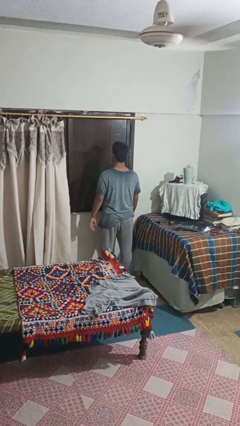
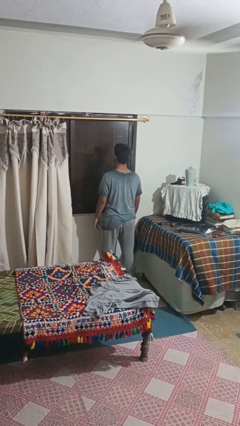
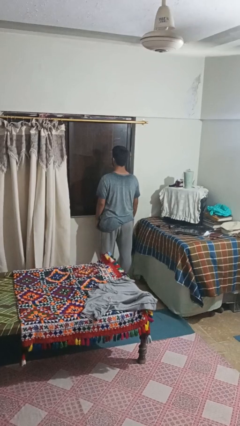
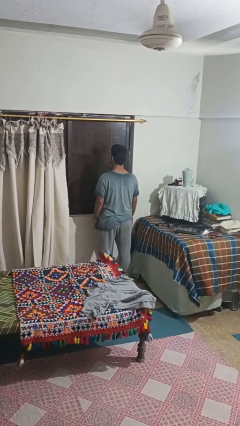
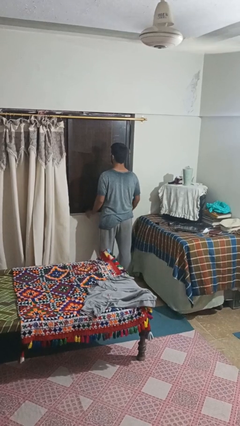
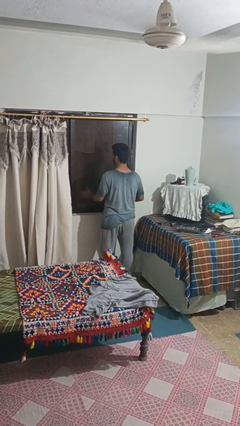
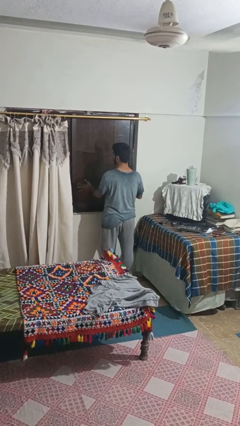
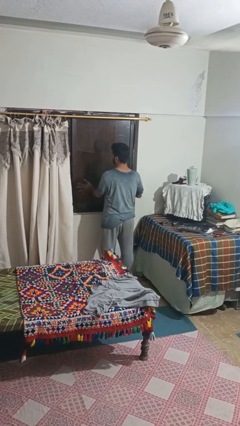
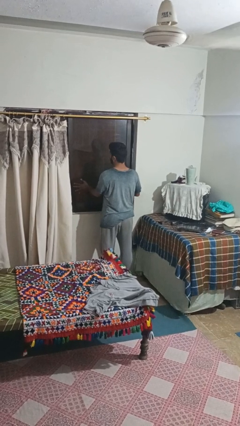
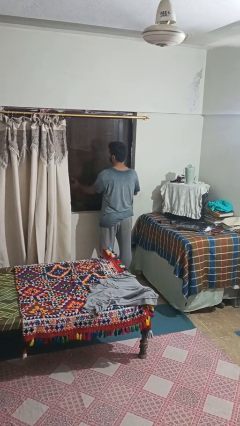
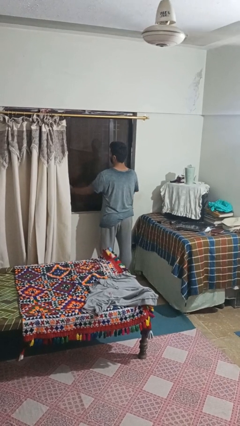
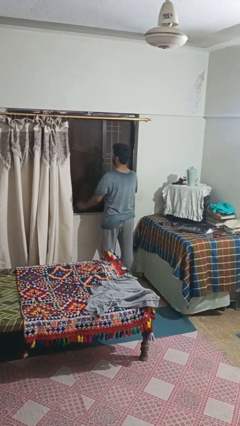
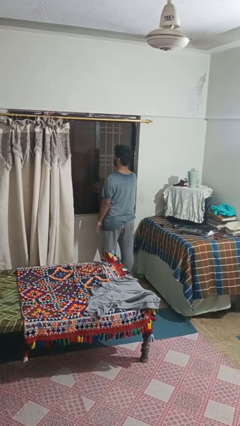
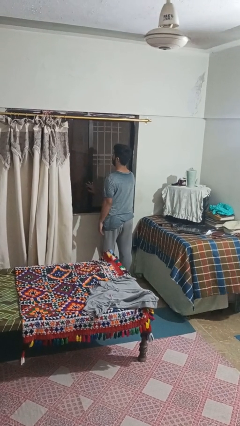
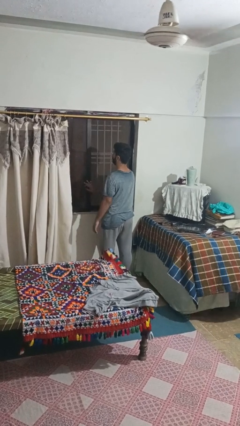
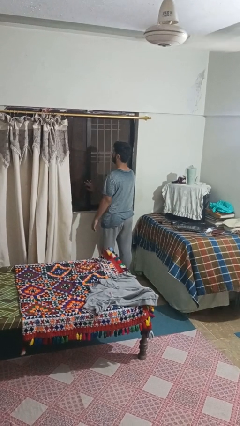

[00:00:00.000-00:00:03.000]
person opens home window

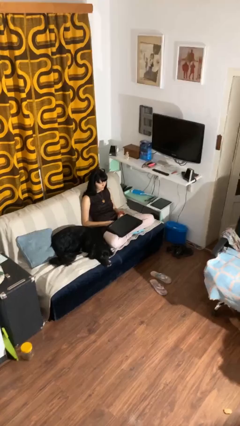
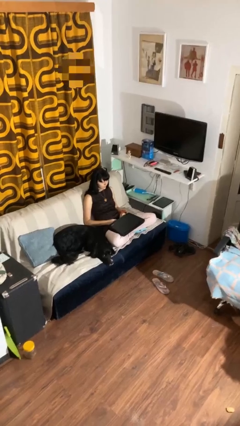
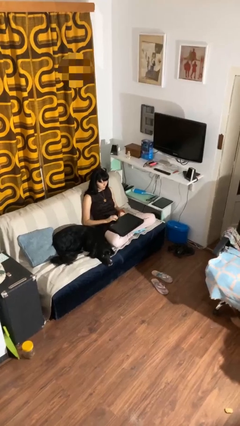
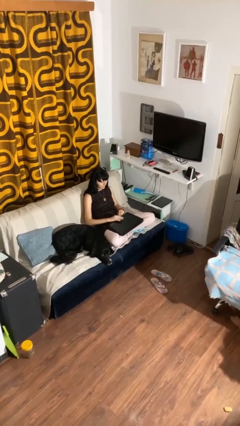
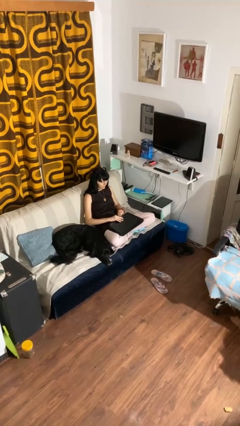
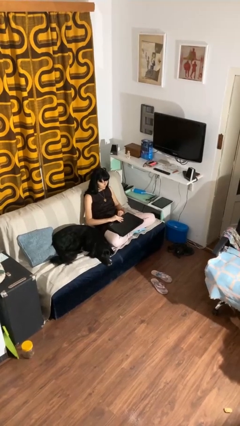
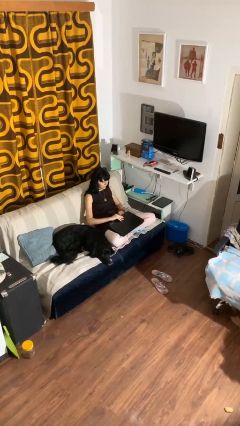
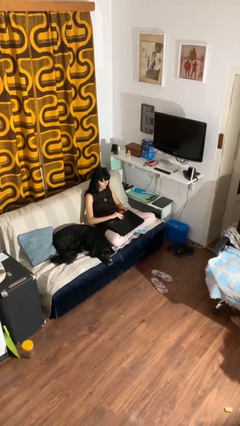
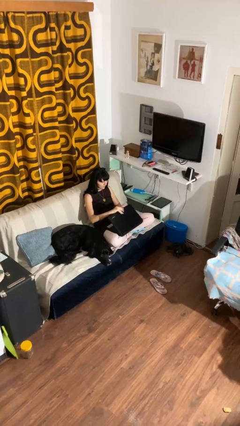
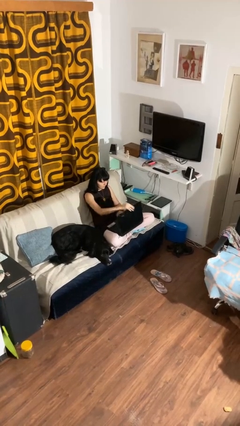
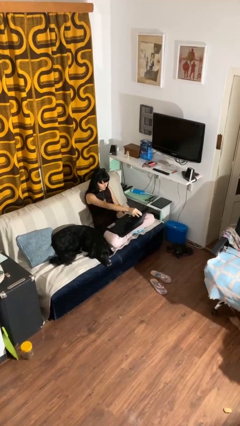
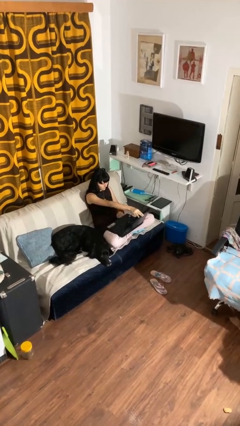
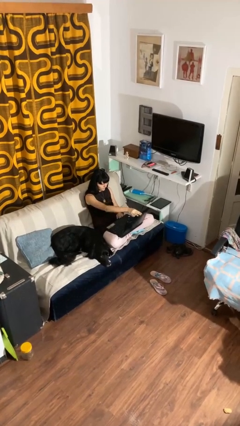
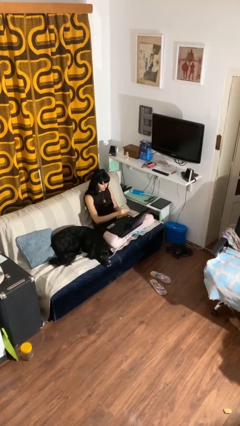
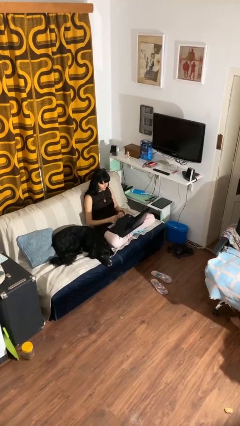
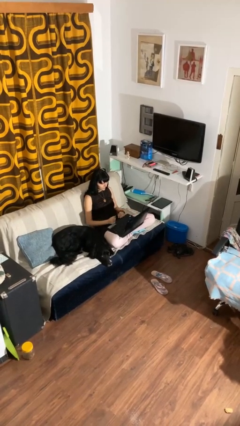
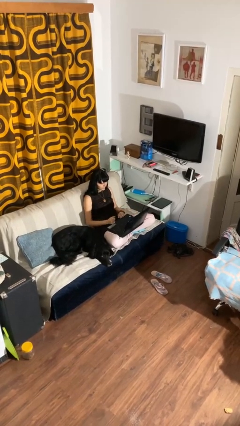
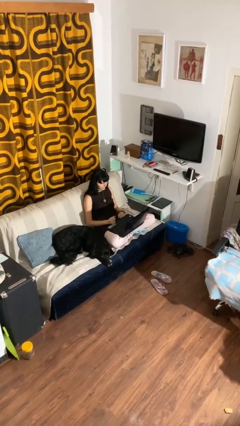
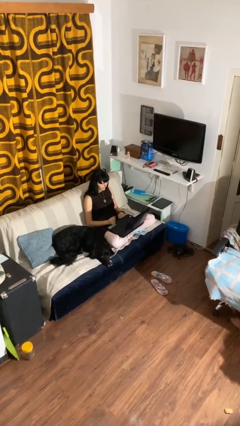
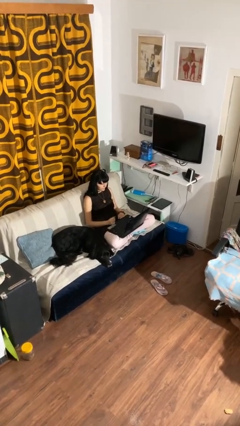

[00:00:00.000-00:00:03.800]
person opens laptop

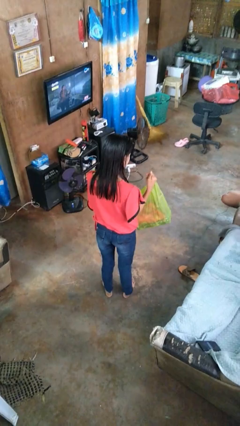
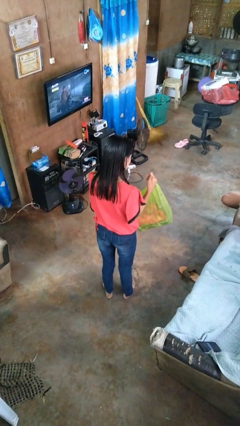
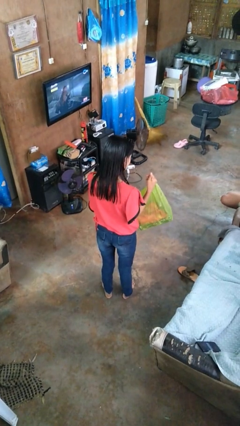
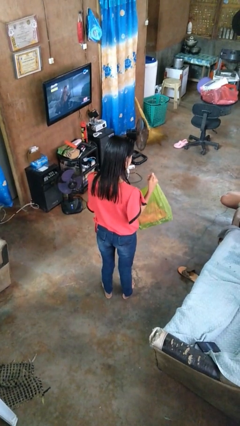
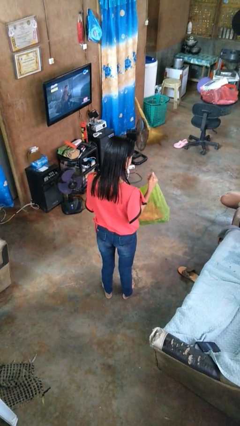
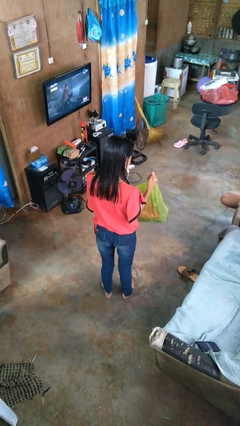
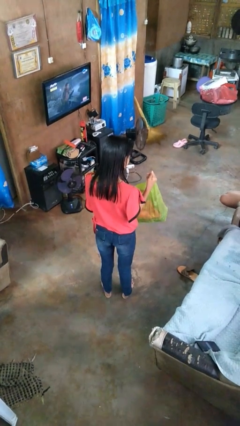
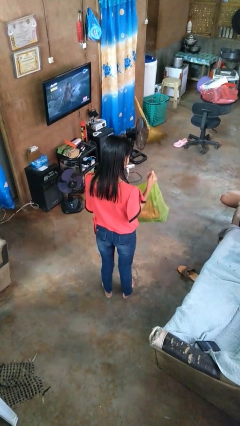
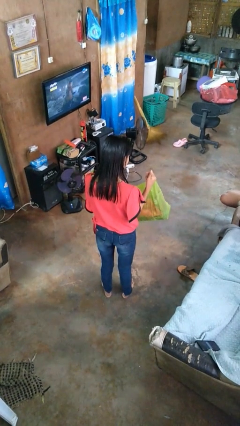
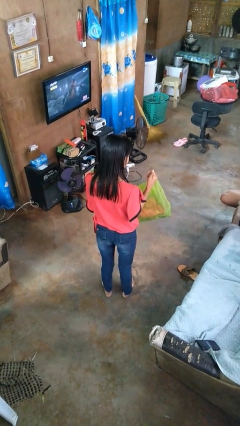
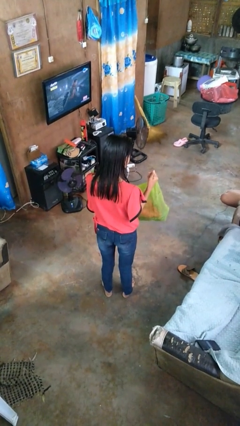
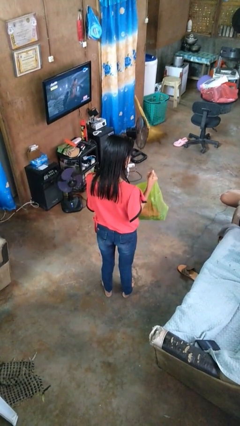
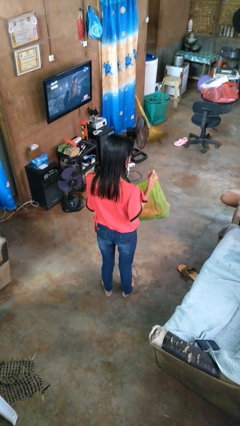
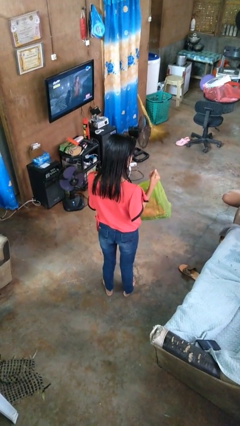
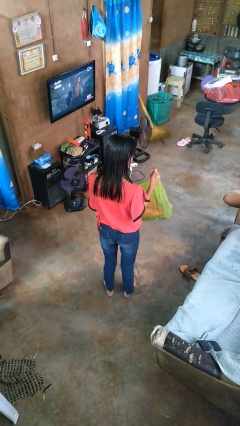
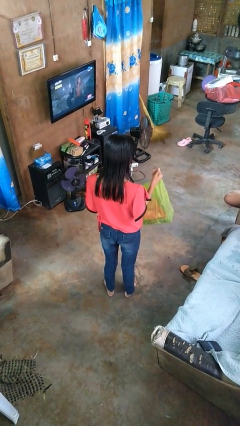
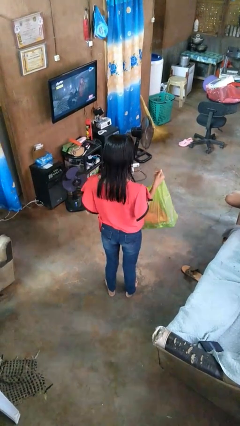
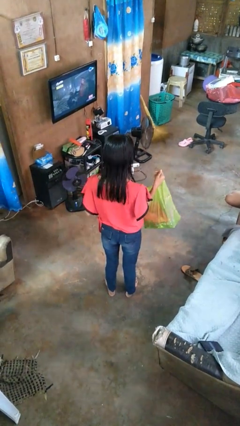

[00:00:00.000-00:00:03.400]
person searches in bag

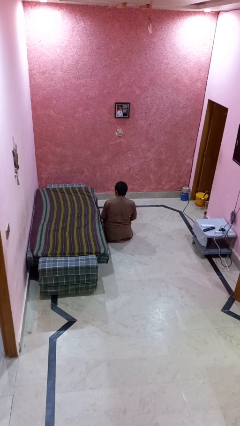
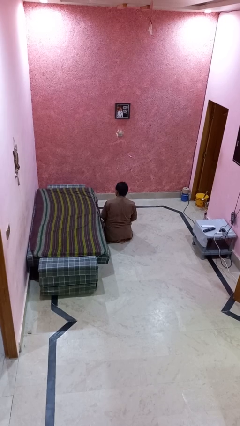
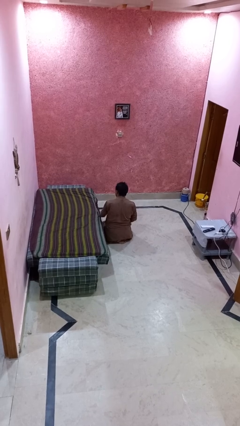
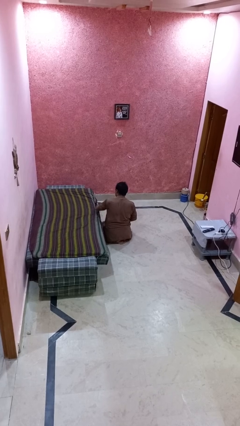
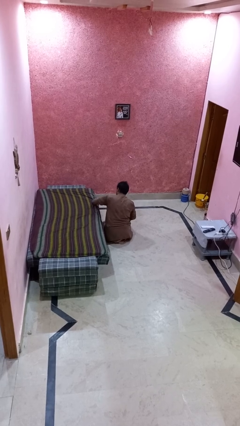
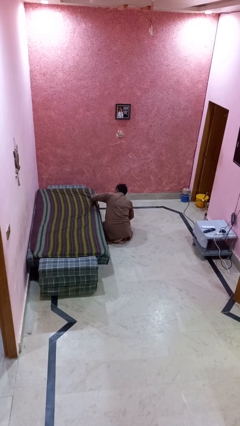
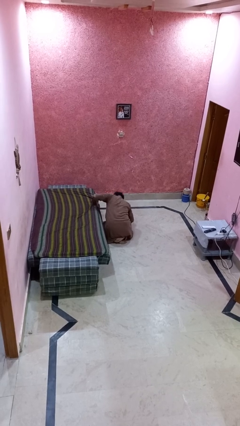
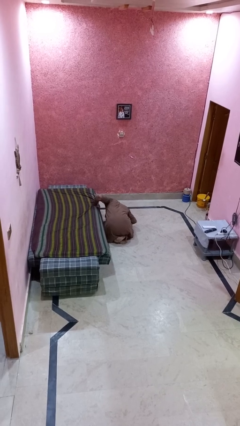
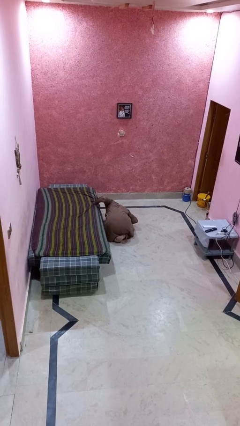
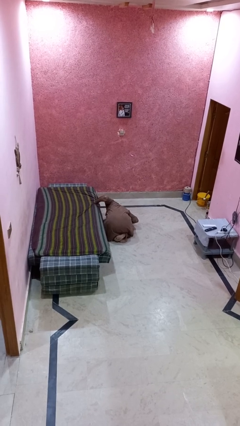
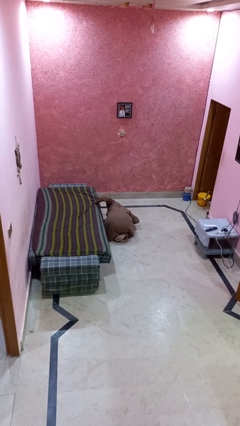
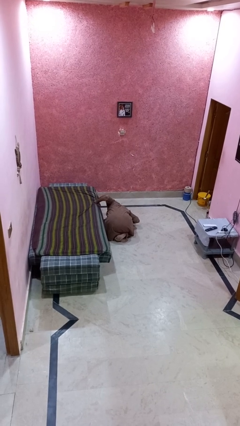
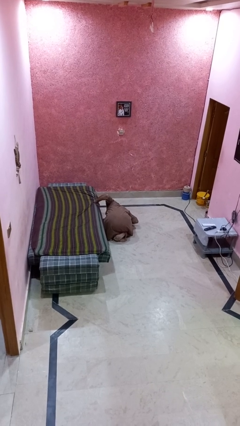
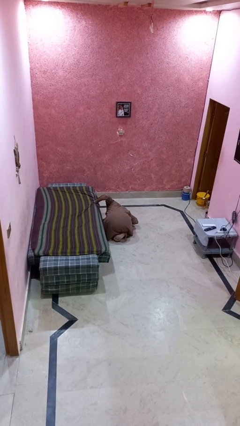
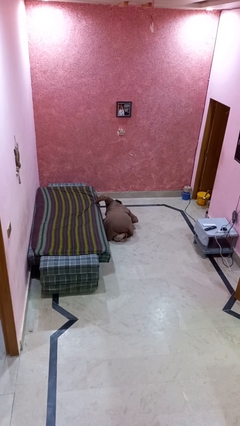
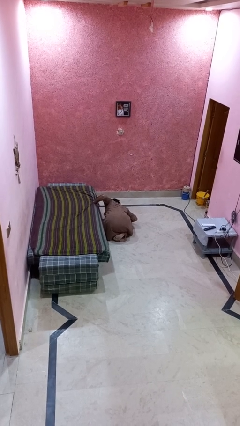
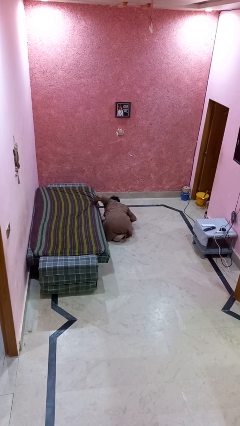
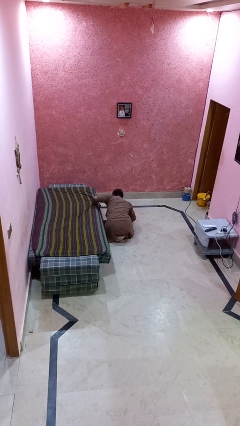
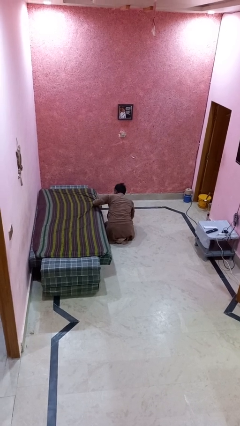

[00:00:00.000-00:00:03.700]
person searches under bed

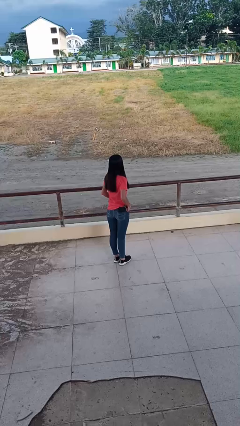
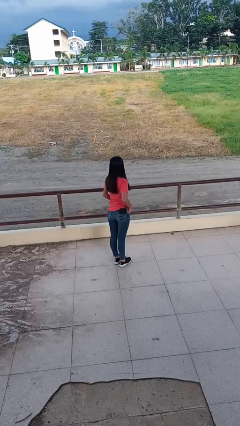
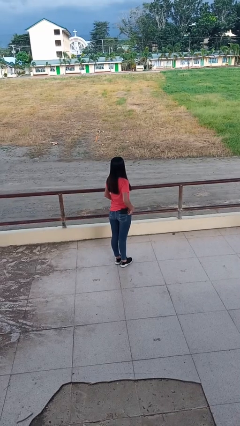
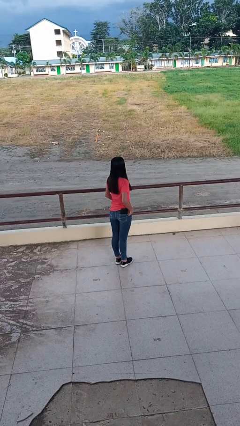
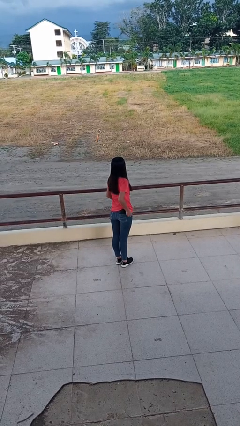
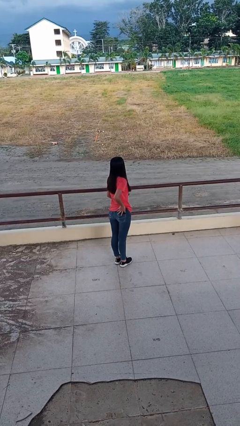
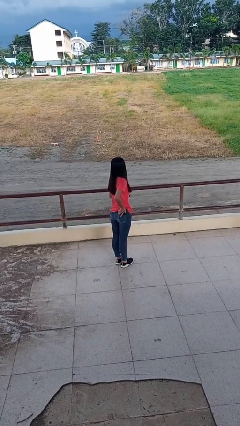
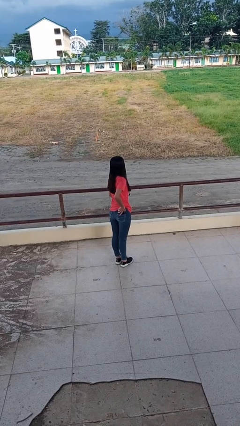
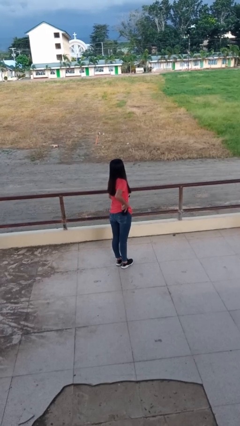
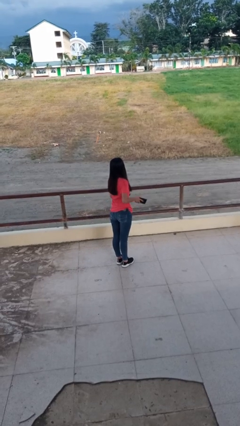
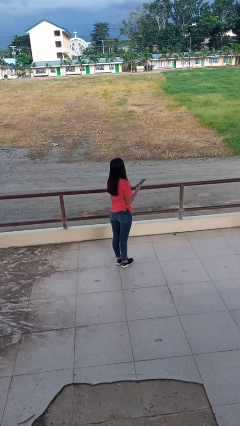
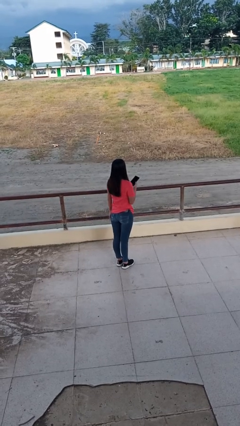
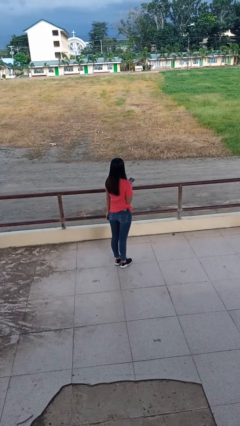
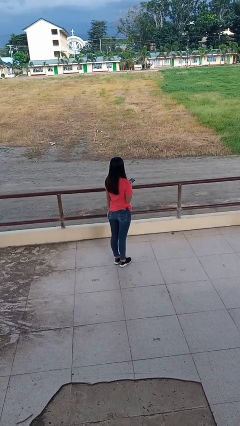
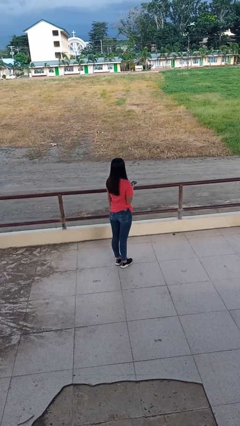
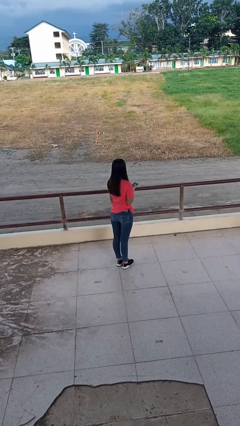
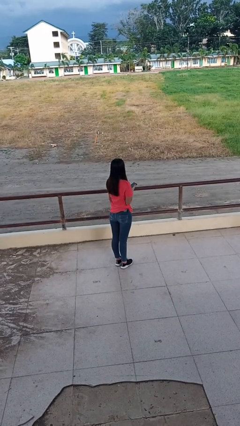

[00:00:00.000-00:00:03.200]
person takes phone from pocket

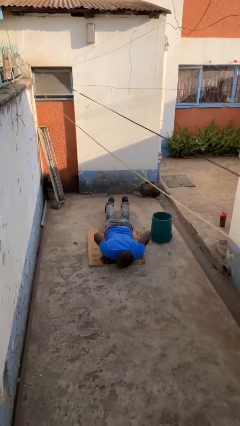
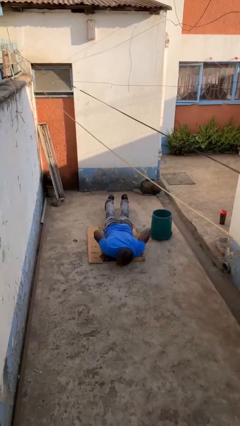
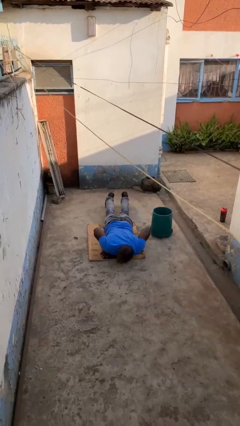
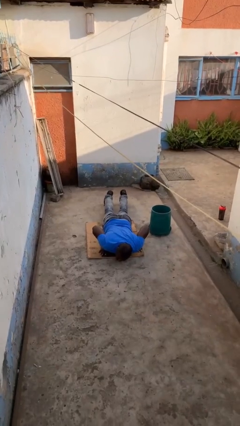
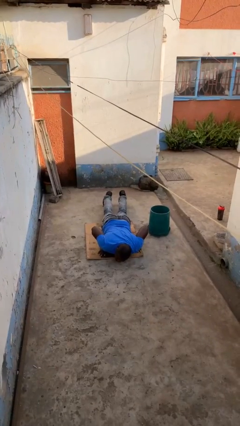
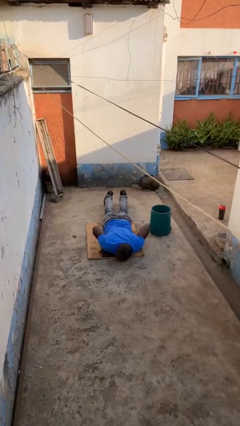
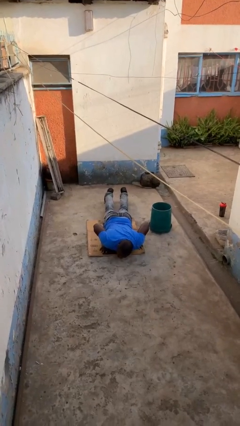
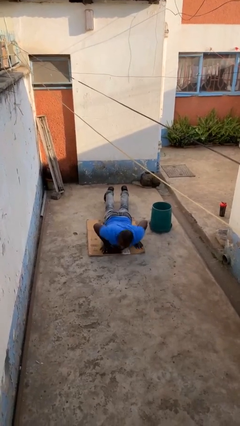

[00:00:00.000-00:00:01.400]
person lies down on floor
